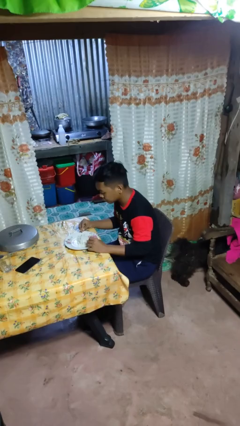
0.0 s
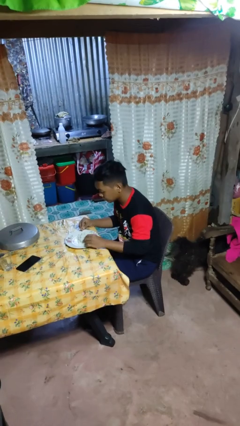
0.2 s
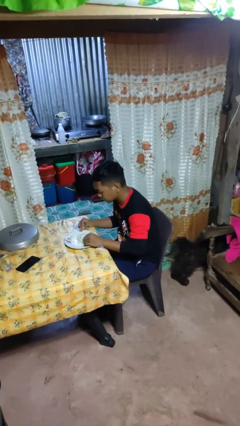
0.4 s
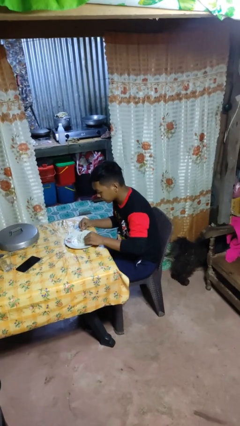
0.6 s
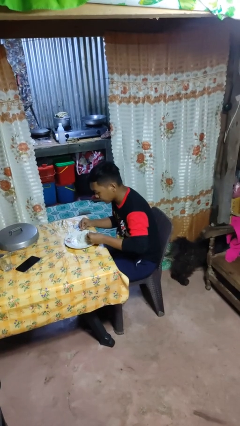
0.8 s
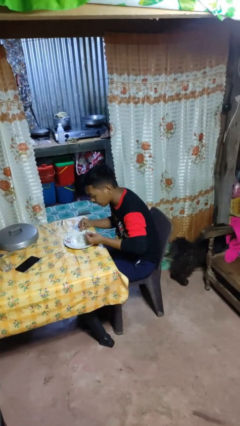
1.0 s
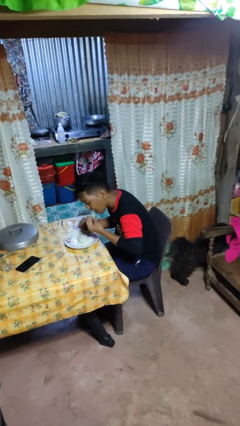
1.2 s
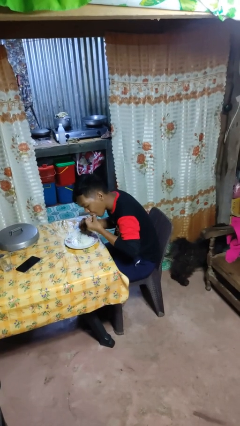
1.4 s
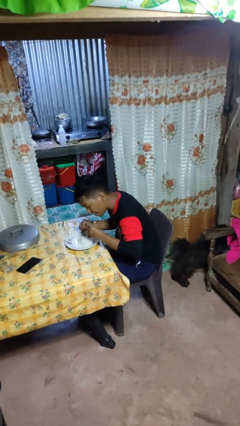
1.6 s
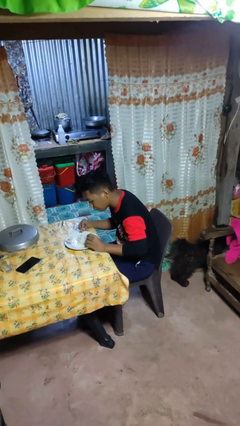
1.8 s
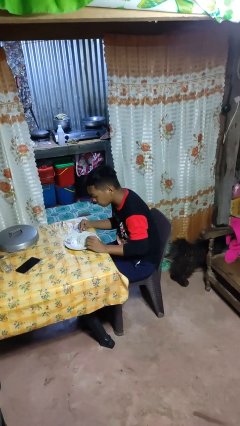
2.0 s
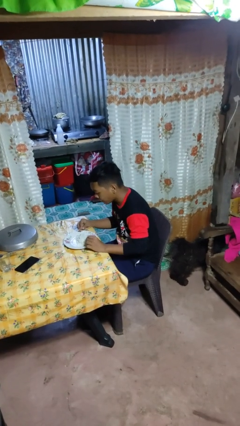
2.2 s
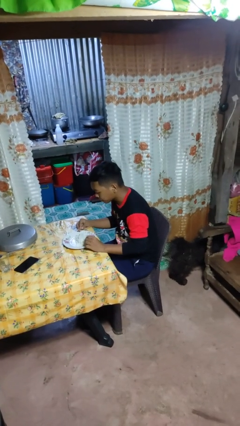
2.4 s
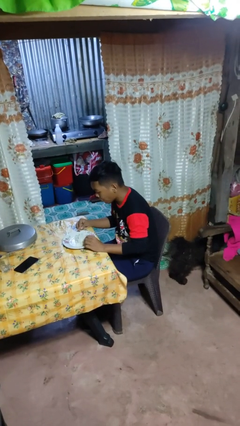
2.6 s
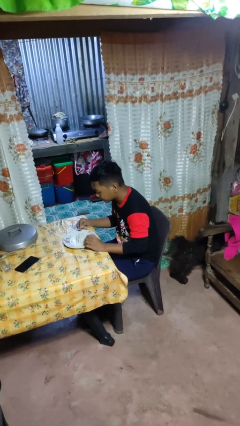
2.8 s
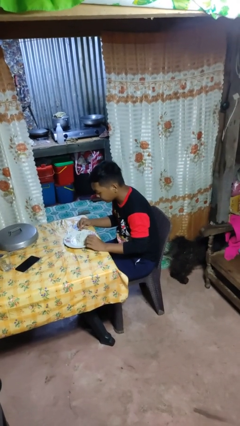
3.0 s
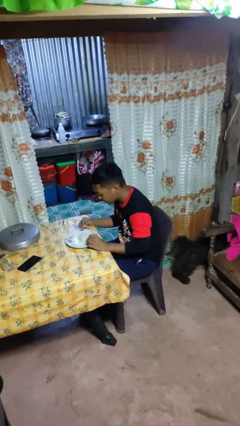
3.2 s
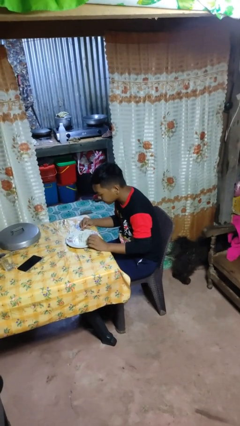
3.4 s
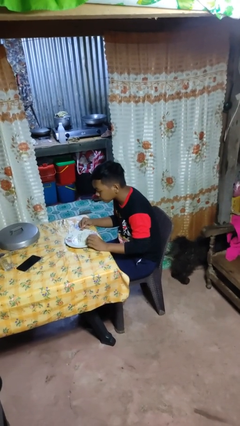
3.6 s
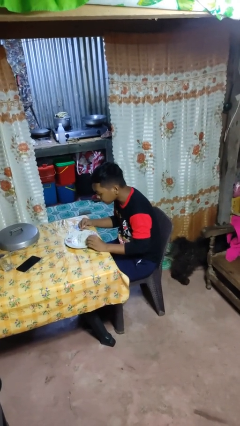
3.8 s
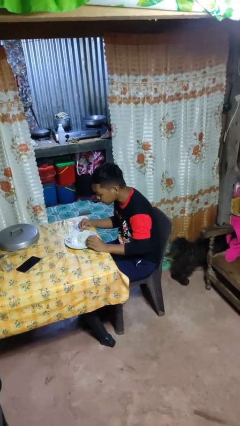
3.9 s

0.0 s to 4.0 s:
person eats with hands

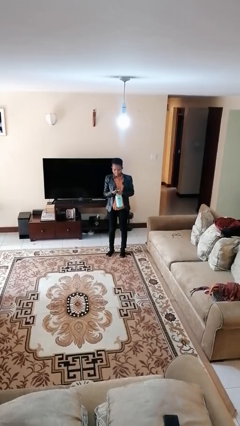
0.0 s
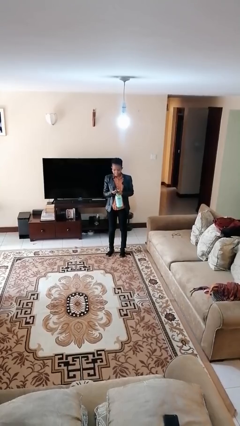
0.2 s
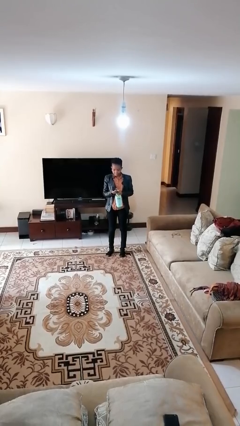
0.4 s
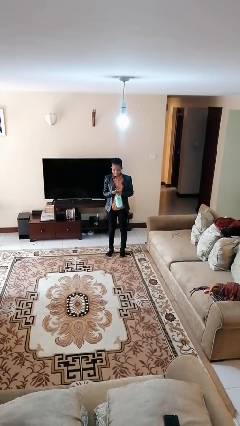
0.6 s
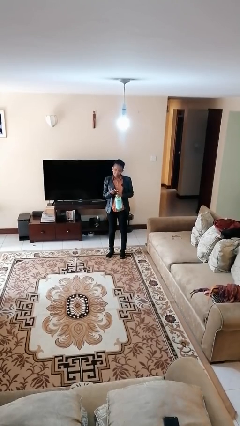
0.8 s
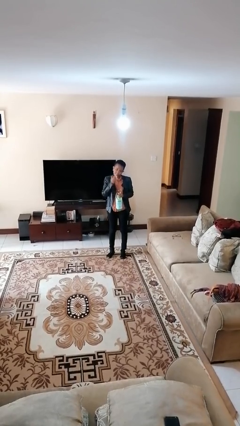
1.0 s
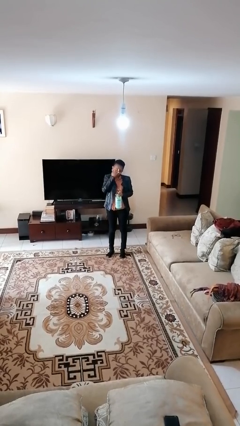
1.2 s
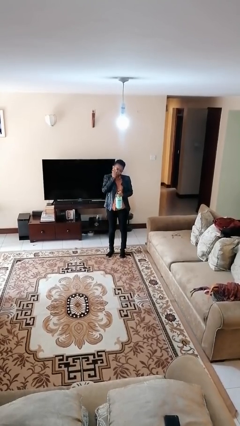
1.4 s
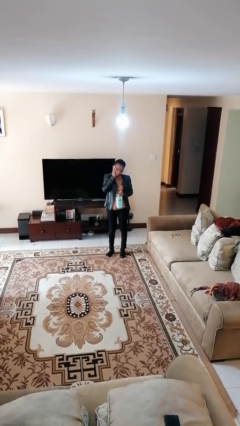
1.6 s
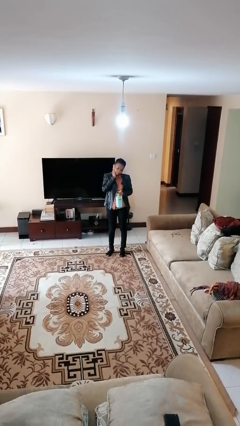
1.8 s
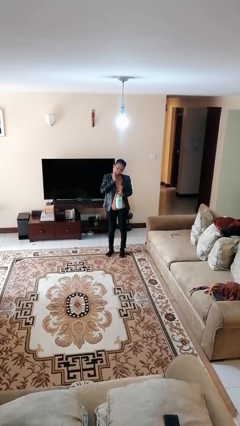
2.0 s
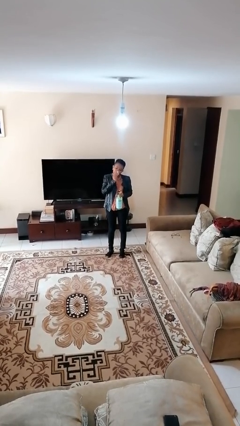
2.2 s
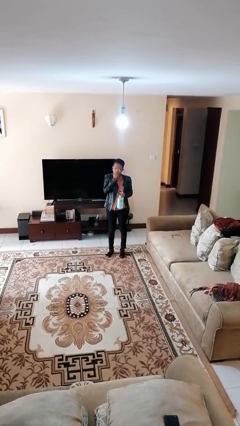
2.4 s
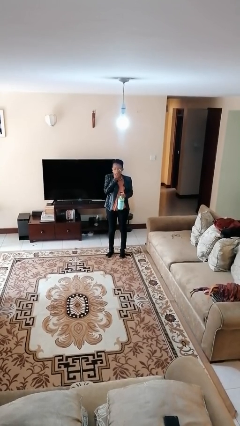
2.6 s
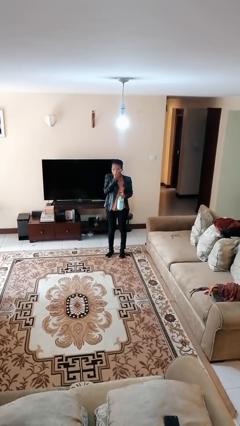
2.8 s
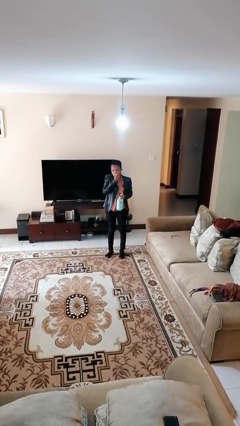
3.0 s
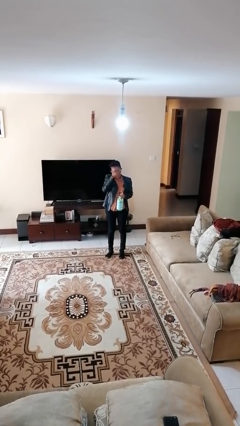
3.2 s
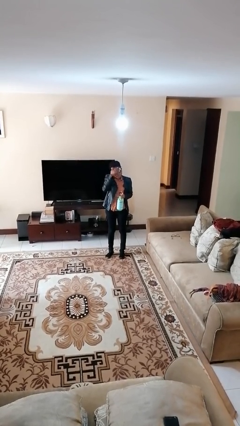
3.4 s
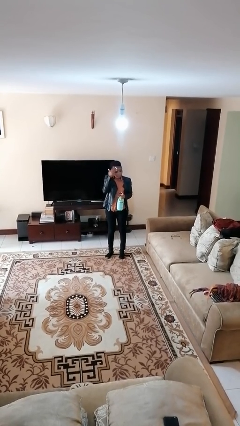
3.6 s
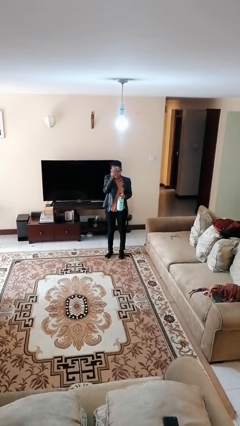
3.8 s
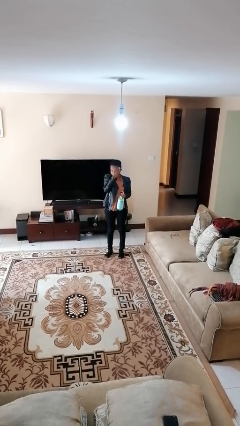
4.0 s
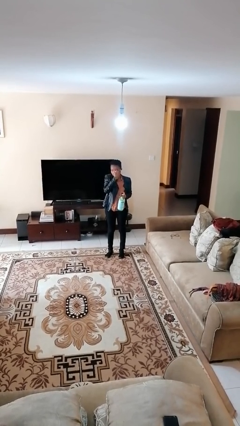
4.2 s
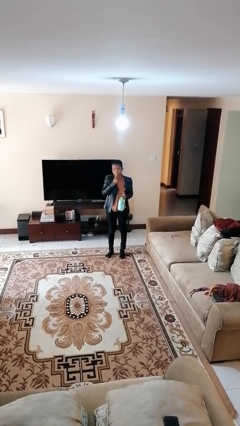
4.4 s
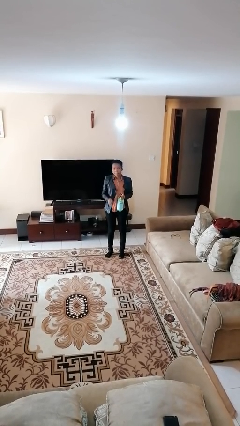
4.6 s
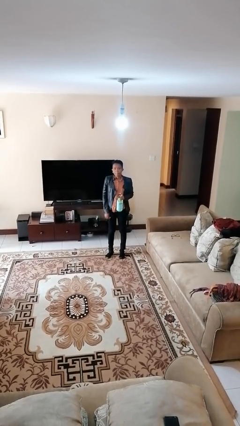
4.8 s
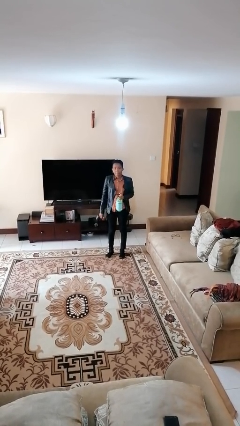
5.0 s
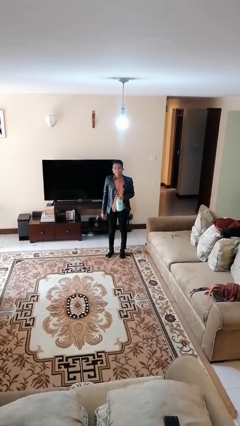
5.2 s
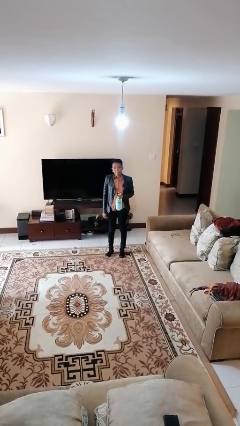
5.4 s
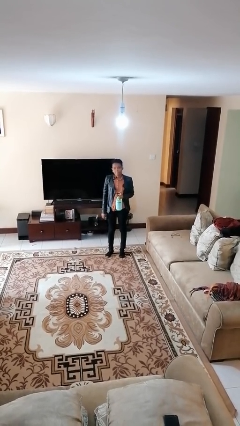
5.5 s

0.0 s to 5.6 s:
person applies facial moisturizer

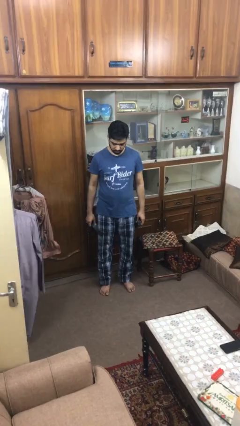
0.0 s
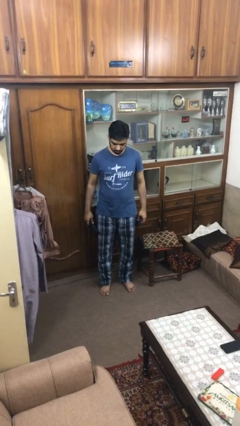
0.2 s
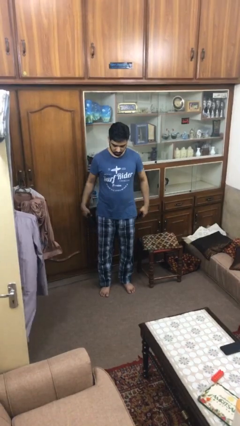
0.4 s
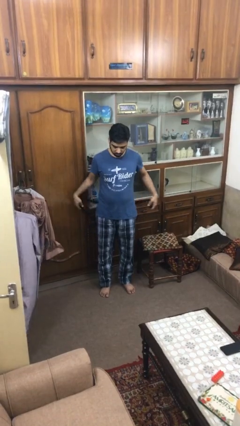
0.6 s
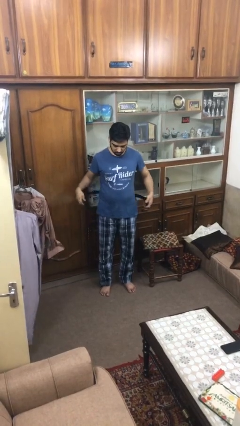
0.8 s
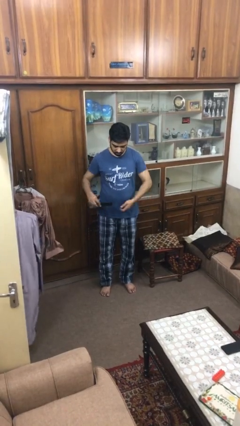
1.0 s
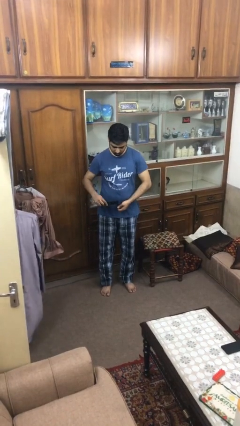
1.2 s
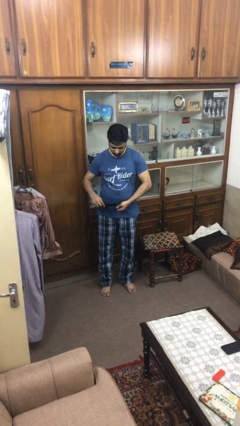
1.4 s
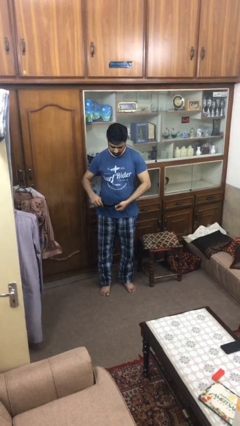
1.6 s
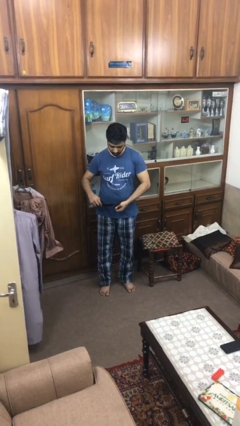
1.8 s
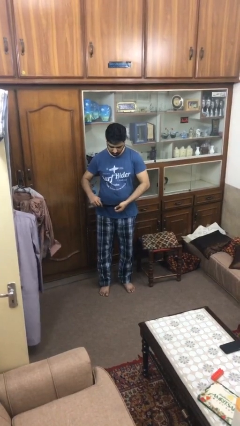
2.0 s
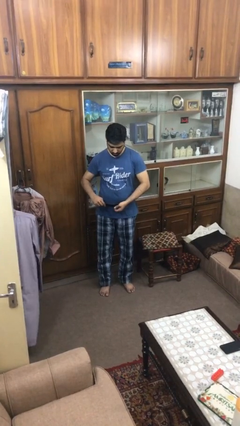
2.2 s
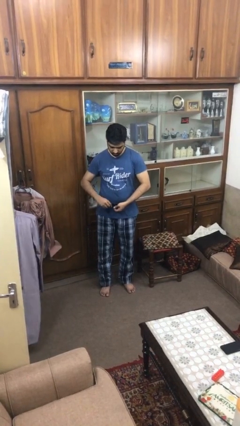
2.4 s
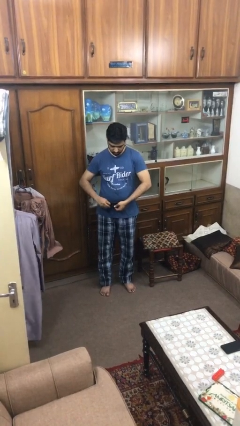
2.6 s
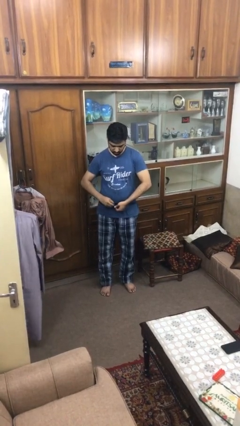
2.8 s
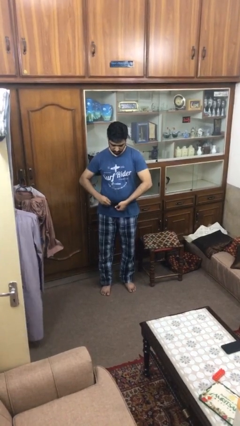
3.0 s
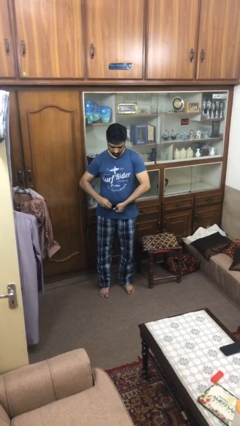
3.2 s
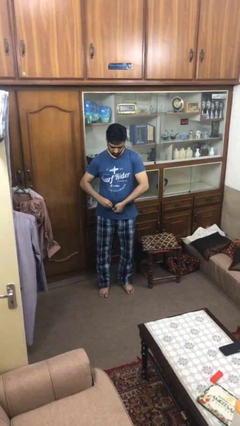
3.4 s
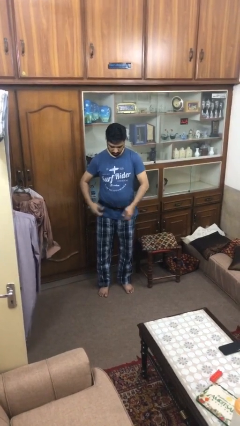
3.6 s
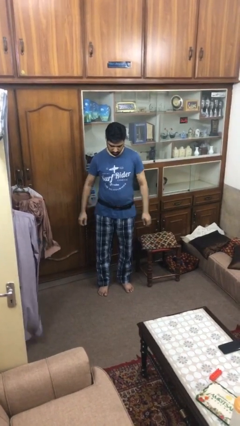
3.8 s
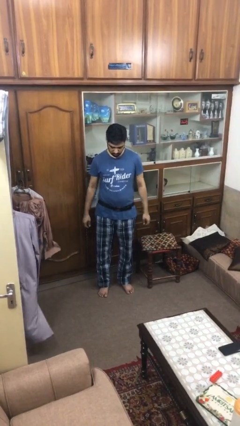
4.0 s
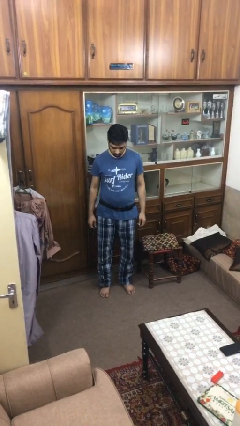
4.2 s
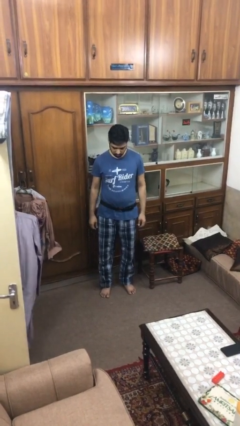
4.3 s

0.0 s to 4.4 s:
person puts on belt

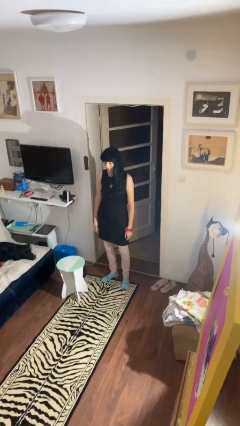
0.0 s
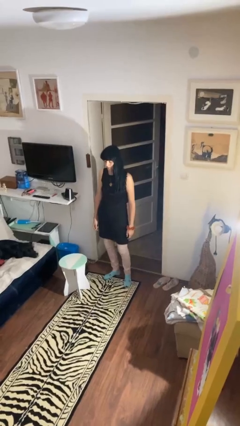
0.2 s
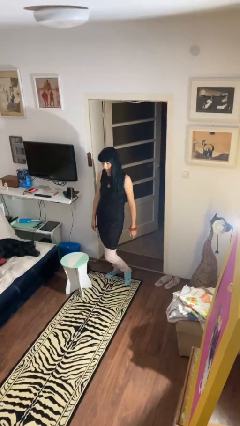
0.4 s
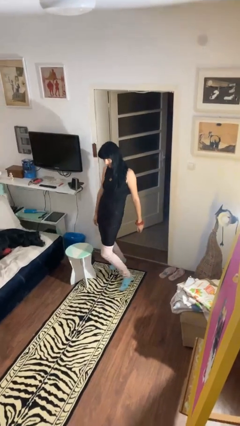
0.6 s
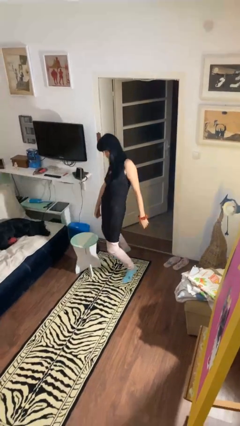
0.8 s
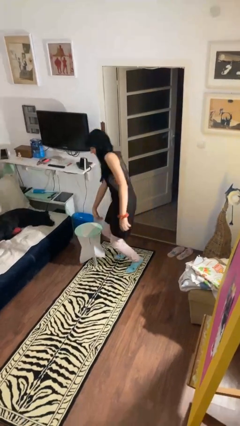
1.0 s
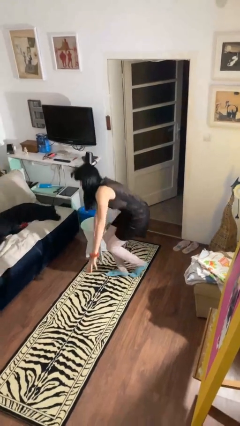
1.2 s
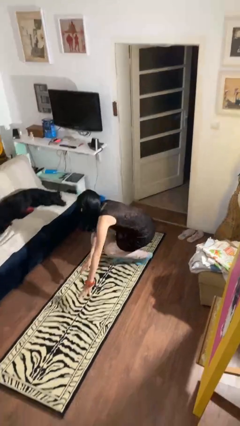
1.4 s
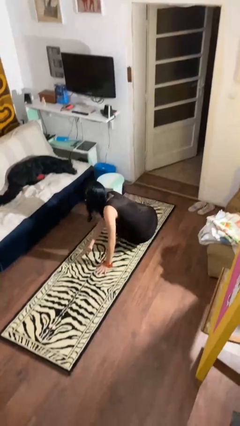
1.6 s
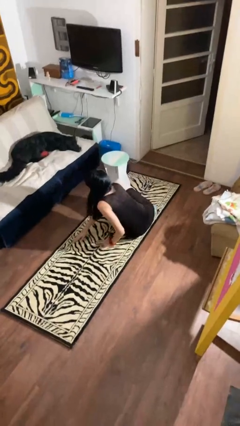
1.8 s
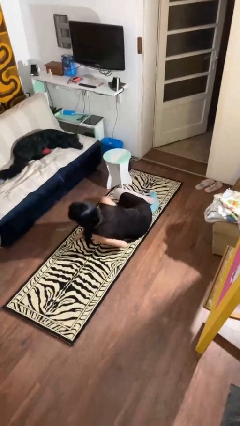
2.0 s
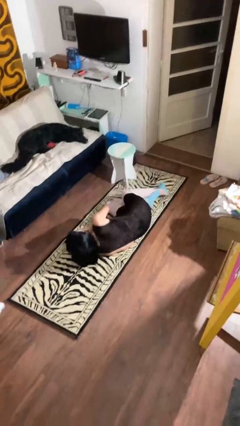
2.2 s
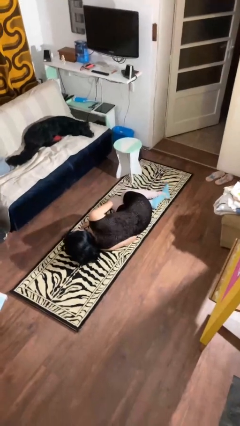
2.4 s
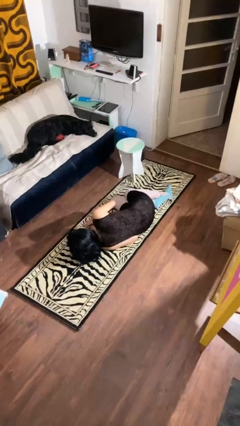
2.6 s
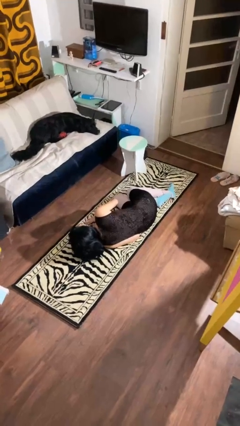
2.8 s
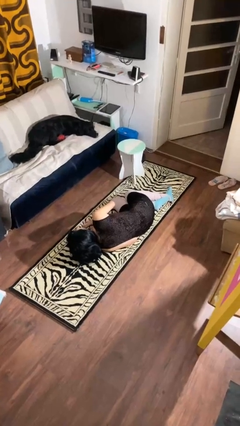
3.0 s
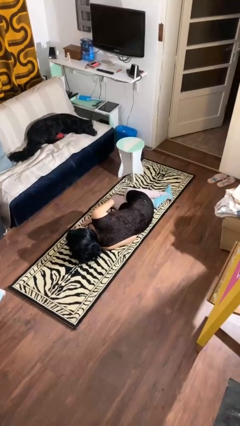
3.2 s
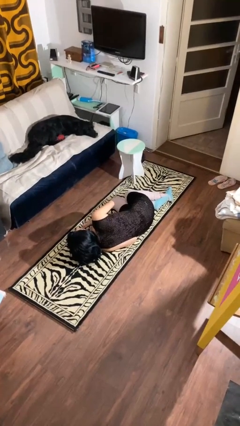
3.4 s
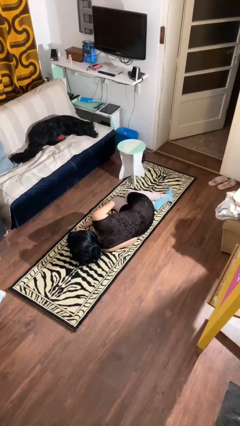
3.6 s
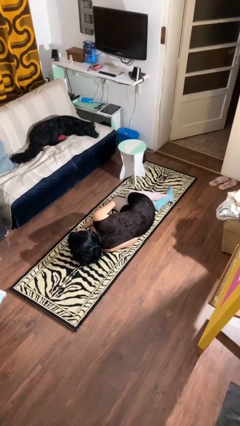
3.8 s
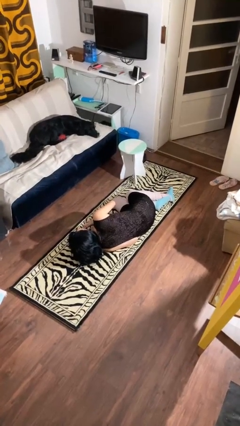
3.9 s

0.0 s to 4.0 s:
person trips on object on floor
